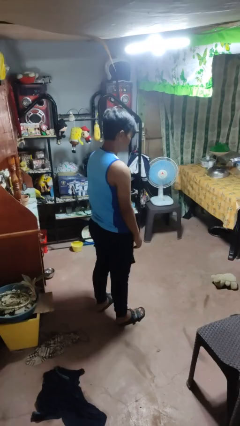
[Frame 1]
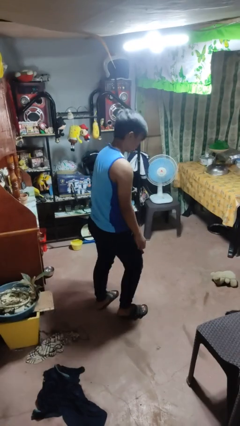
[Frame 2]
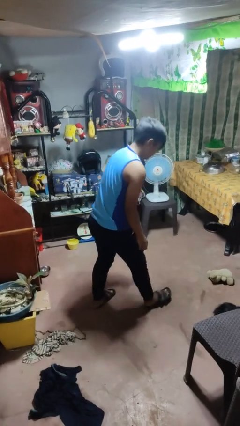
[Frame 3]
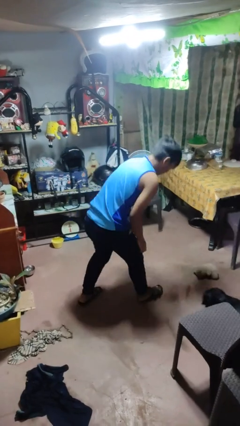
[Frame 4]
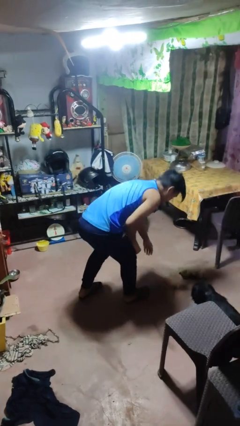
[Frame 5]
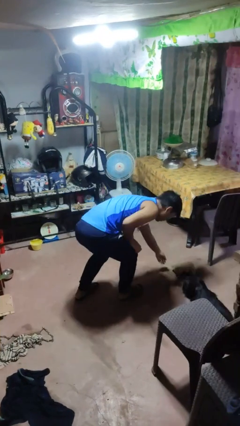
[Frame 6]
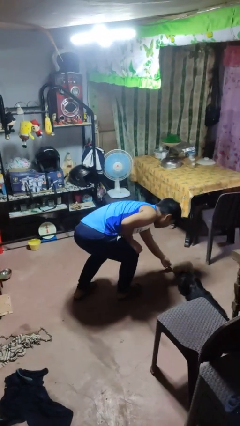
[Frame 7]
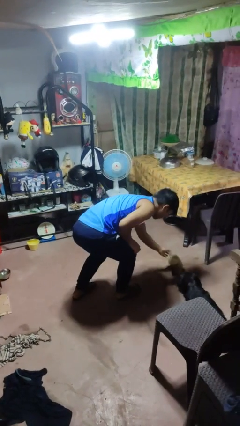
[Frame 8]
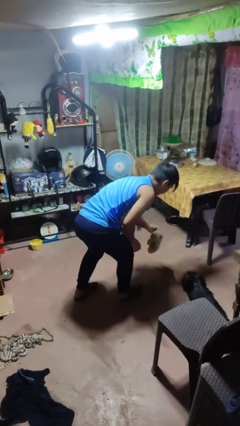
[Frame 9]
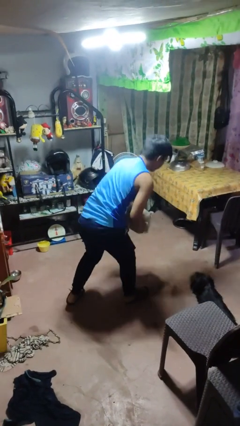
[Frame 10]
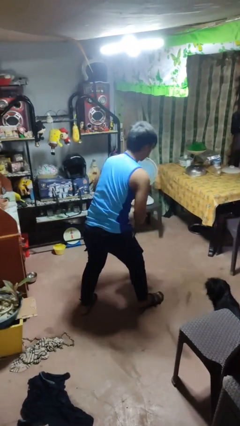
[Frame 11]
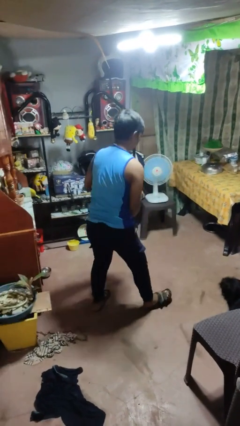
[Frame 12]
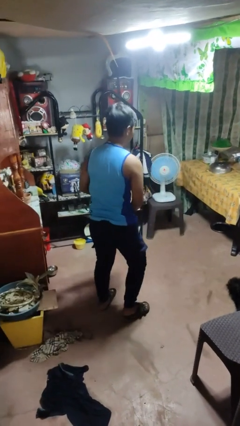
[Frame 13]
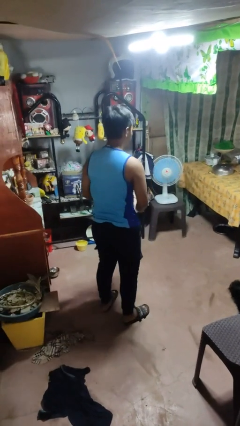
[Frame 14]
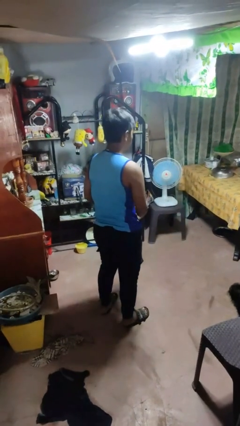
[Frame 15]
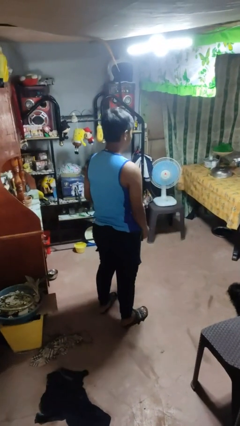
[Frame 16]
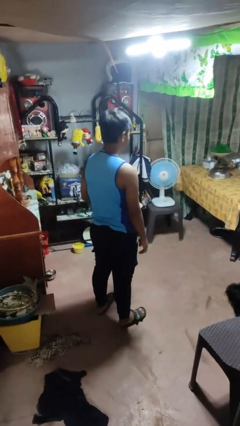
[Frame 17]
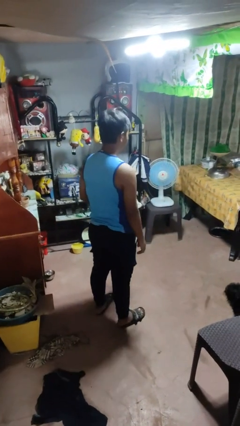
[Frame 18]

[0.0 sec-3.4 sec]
person picks up object from floor

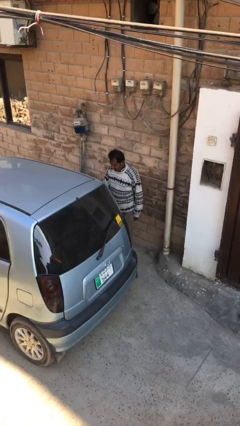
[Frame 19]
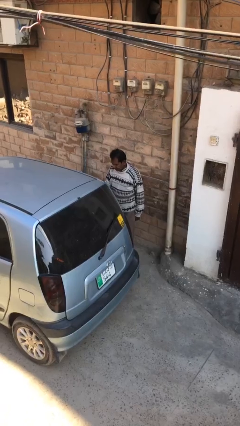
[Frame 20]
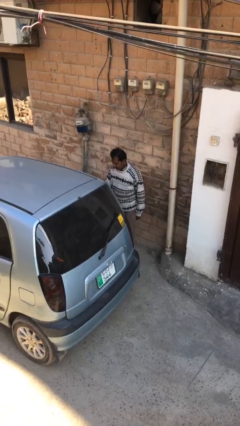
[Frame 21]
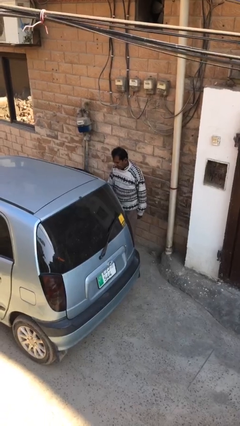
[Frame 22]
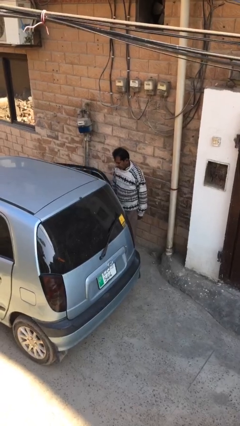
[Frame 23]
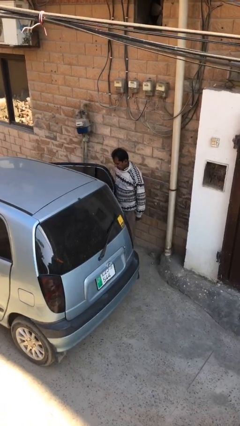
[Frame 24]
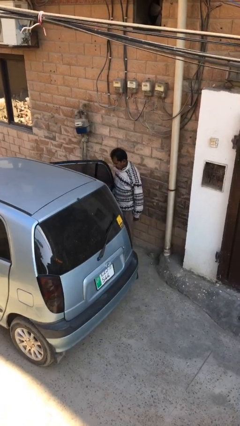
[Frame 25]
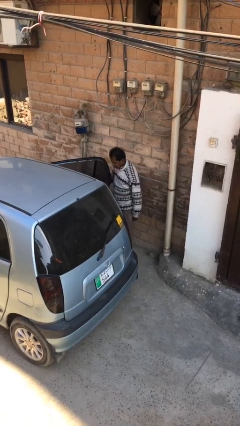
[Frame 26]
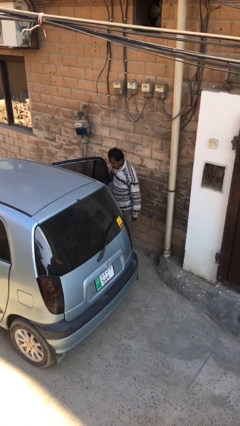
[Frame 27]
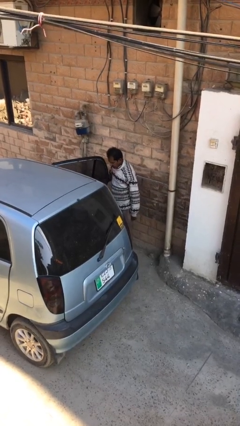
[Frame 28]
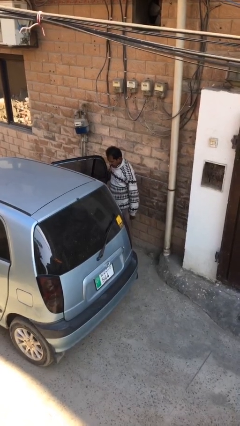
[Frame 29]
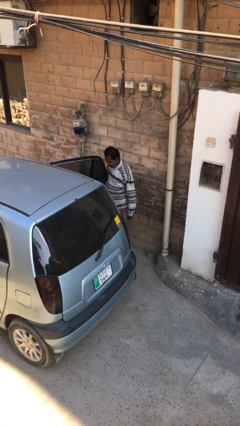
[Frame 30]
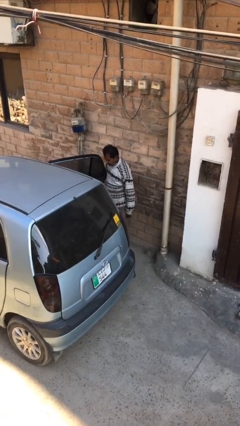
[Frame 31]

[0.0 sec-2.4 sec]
person opens car door

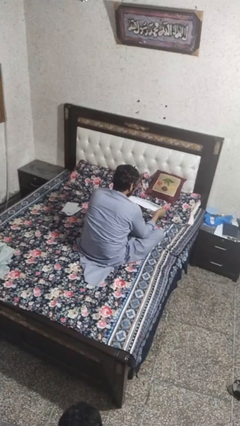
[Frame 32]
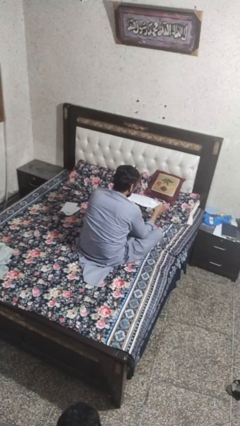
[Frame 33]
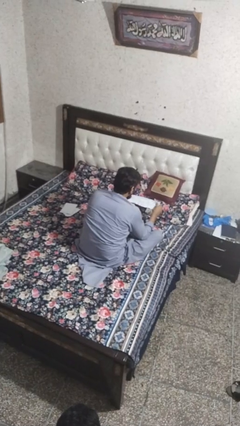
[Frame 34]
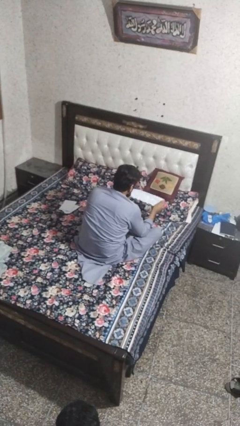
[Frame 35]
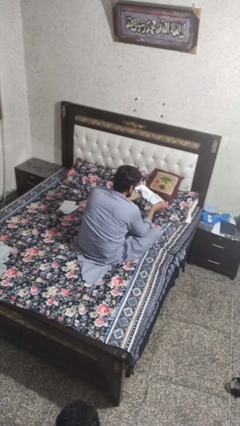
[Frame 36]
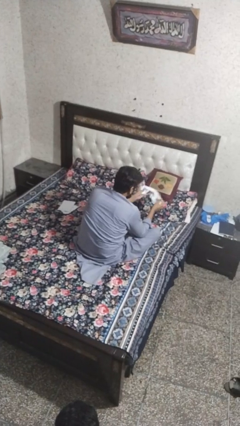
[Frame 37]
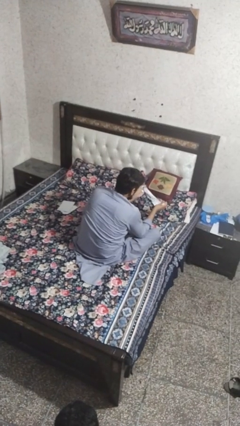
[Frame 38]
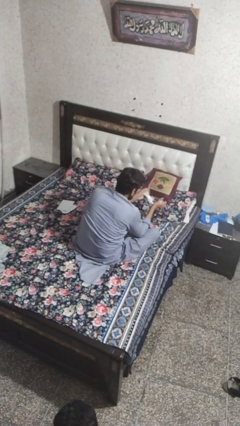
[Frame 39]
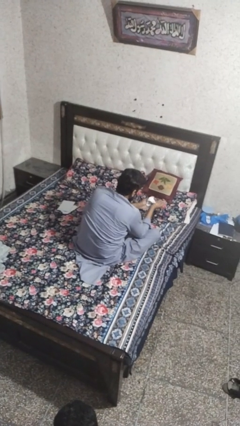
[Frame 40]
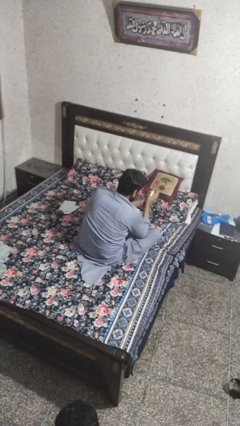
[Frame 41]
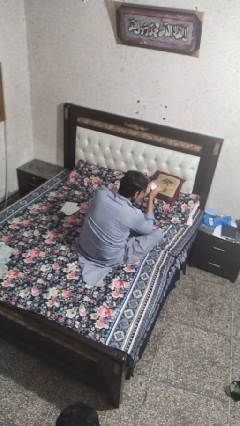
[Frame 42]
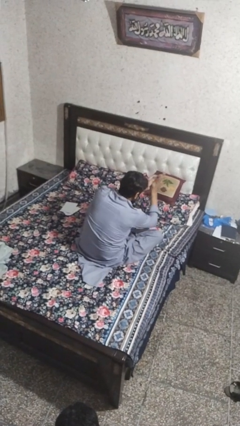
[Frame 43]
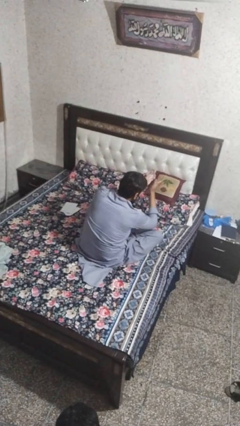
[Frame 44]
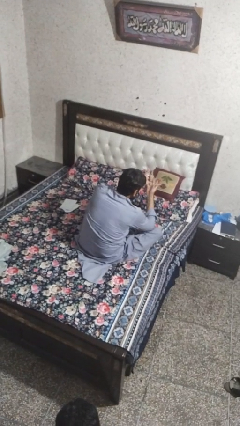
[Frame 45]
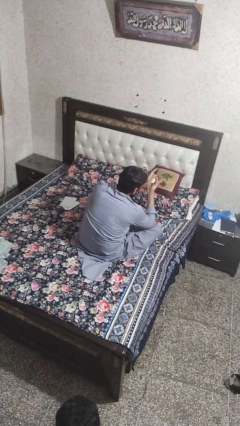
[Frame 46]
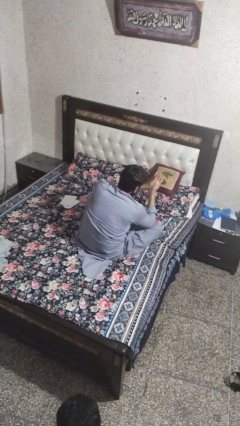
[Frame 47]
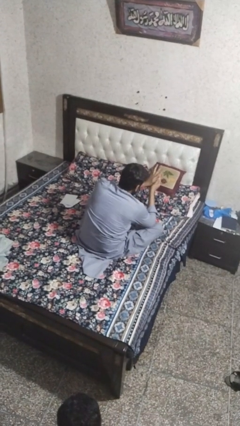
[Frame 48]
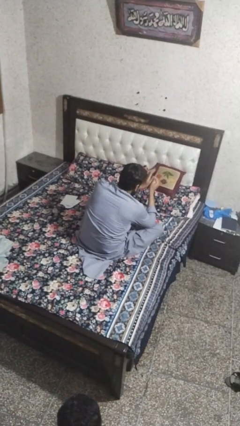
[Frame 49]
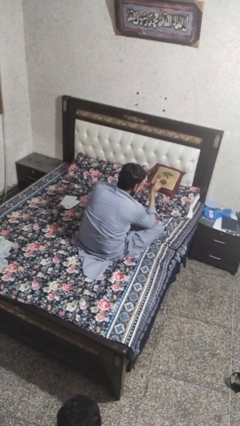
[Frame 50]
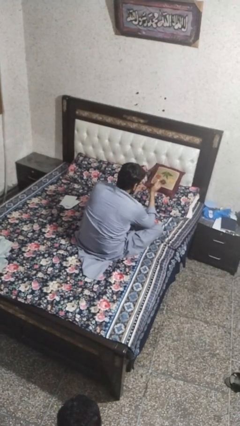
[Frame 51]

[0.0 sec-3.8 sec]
person crumples paper

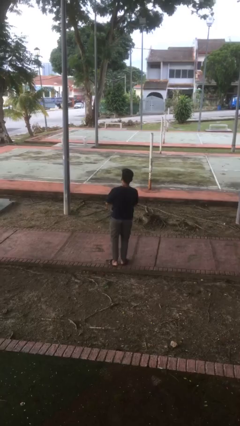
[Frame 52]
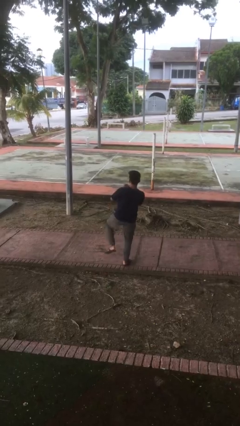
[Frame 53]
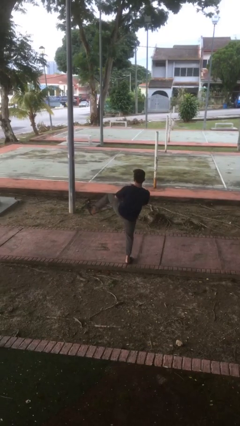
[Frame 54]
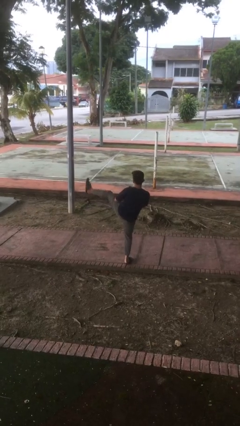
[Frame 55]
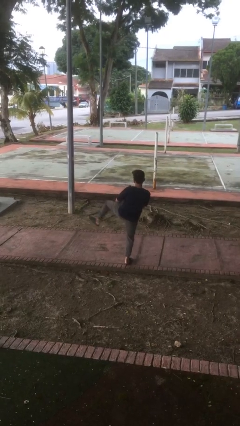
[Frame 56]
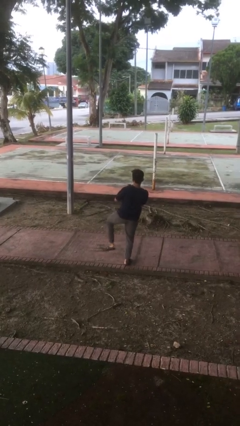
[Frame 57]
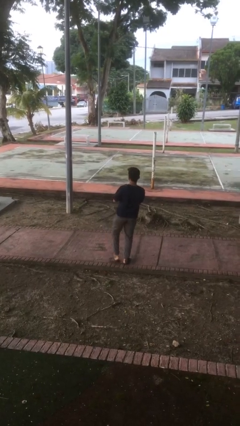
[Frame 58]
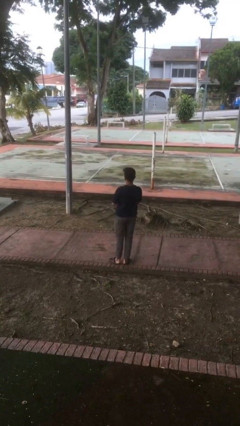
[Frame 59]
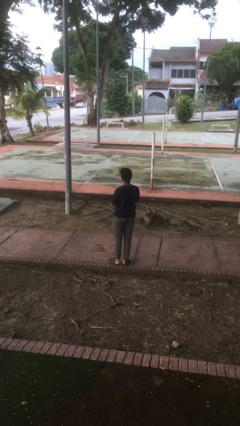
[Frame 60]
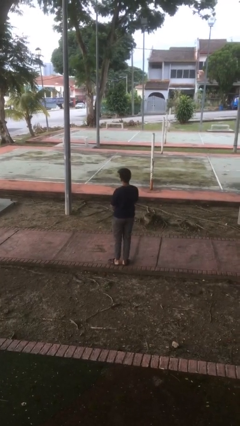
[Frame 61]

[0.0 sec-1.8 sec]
person karate kicks

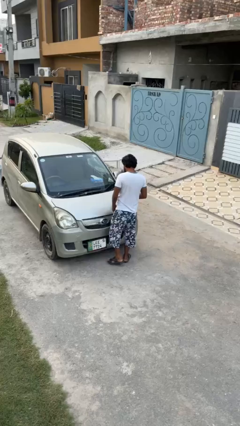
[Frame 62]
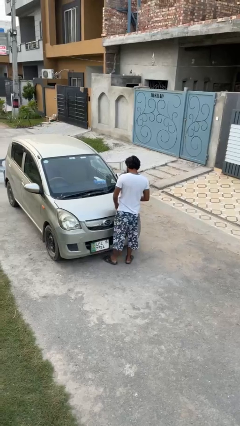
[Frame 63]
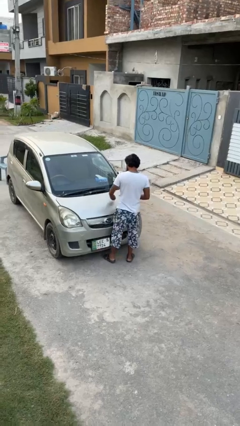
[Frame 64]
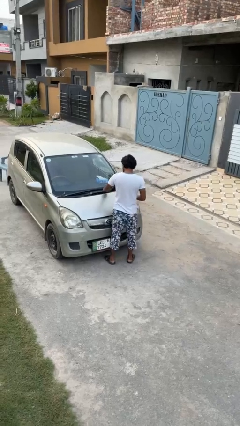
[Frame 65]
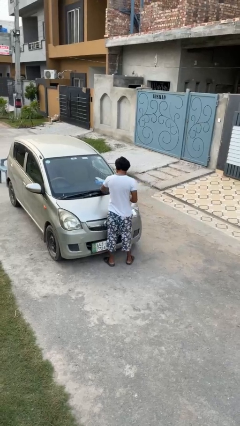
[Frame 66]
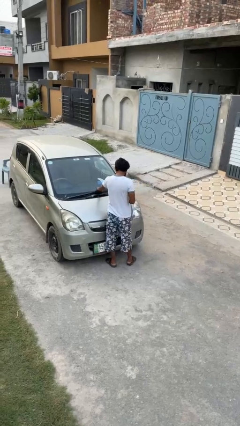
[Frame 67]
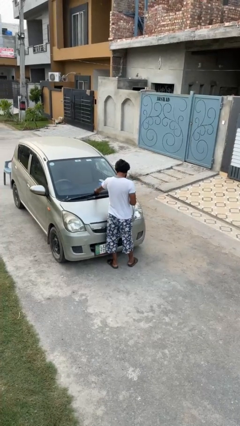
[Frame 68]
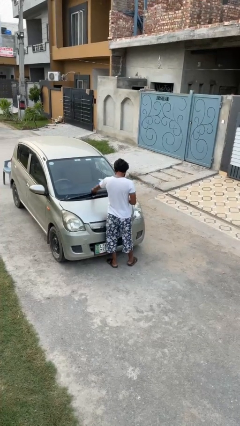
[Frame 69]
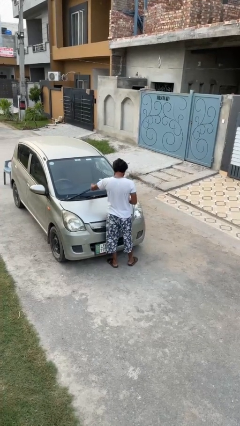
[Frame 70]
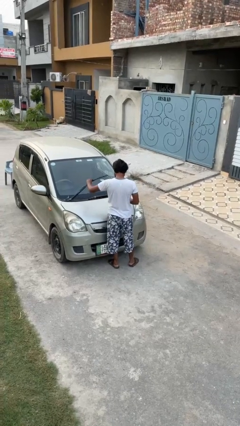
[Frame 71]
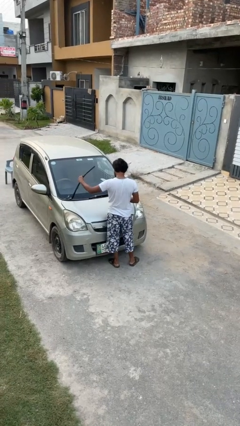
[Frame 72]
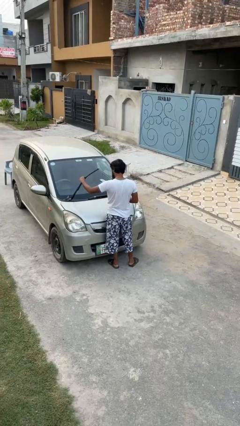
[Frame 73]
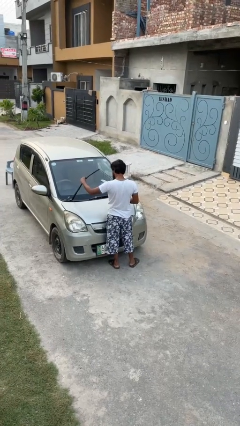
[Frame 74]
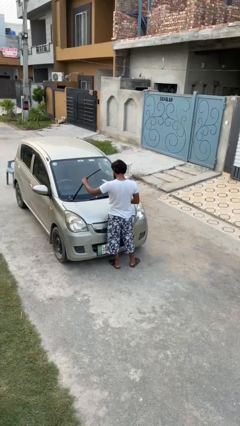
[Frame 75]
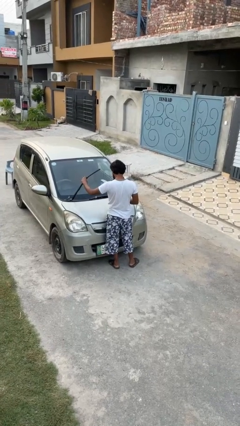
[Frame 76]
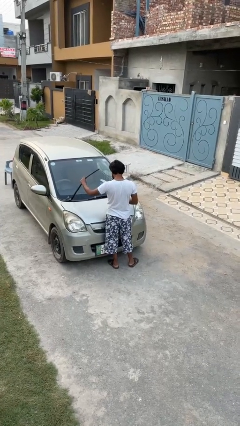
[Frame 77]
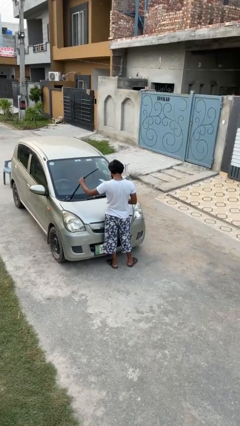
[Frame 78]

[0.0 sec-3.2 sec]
person flips up car wipers

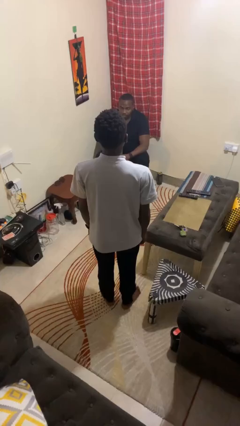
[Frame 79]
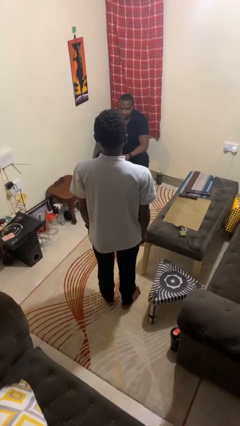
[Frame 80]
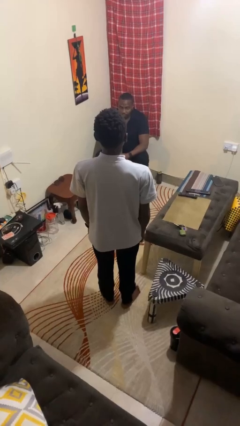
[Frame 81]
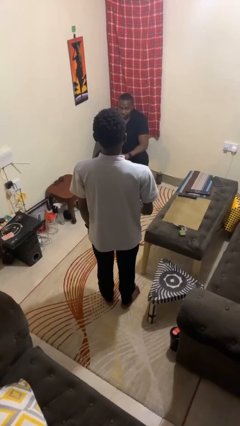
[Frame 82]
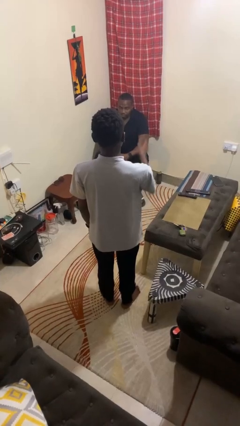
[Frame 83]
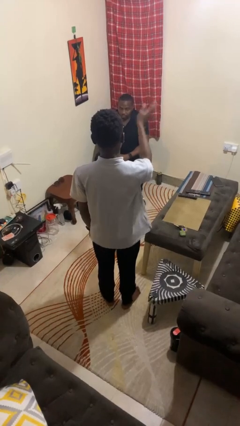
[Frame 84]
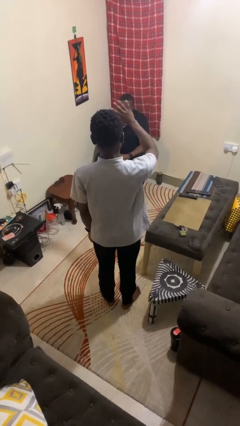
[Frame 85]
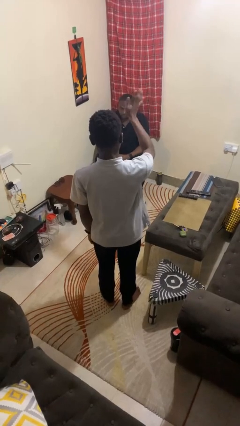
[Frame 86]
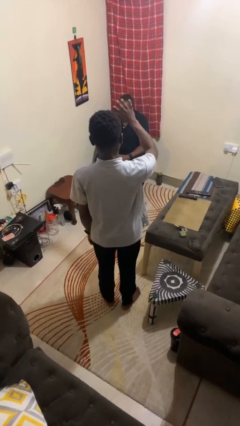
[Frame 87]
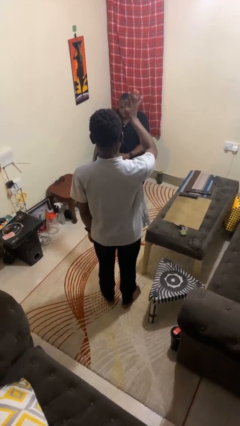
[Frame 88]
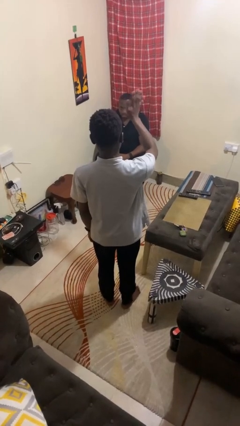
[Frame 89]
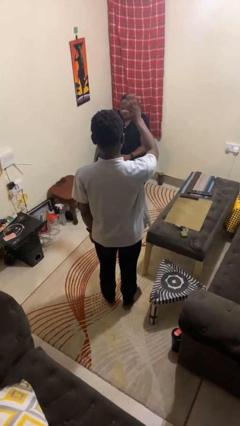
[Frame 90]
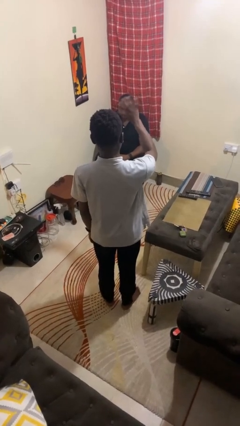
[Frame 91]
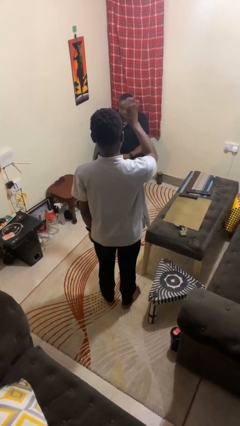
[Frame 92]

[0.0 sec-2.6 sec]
person waves at person
